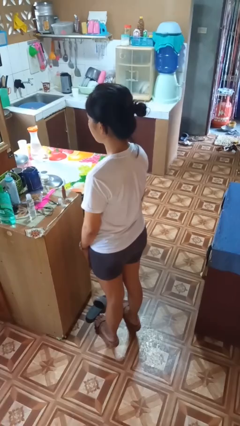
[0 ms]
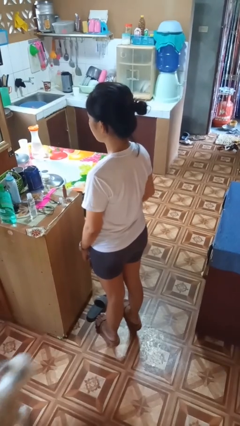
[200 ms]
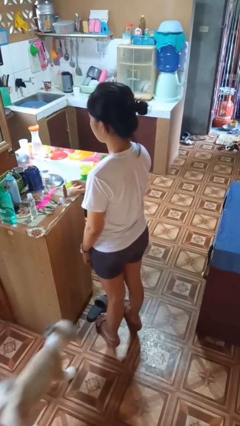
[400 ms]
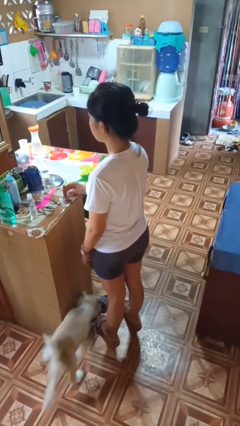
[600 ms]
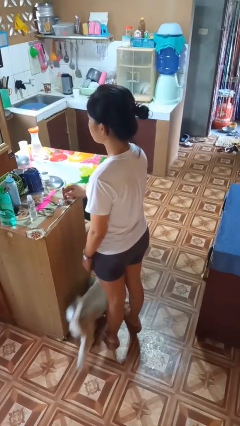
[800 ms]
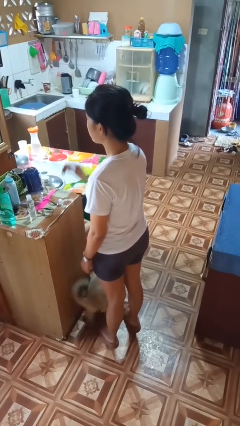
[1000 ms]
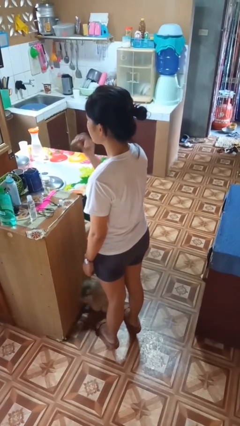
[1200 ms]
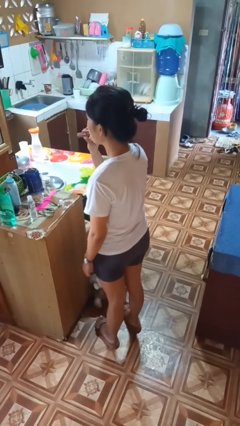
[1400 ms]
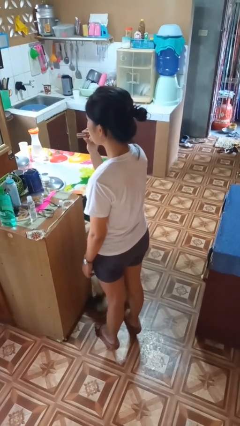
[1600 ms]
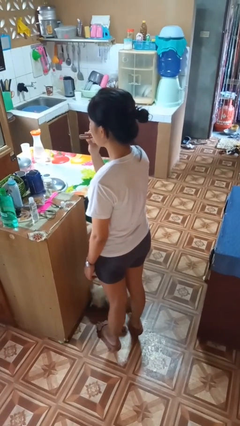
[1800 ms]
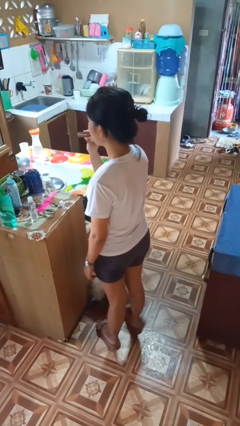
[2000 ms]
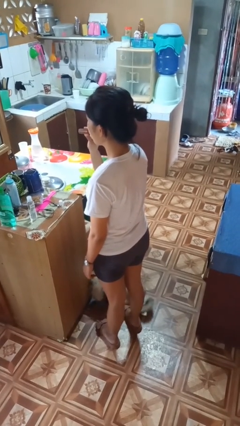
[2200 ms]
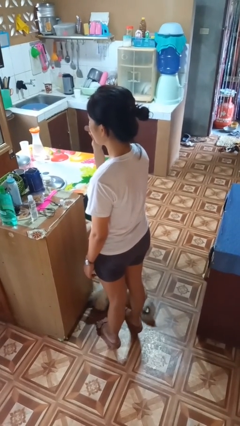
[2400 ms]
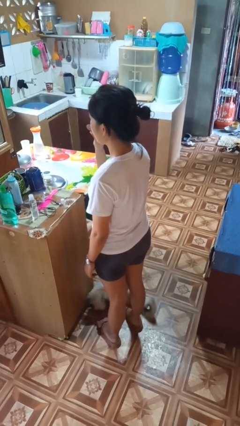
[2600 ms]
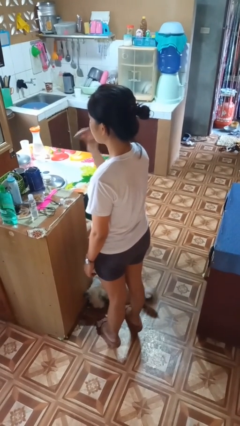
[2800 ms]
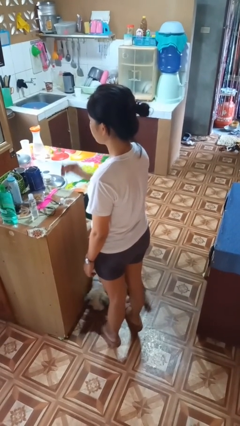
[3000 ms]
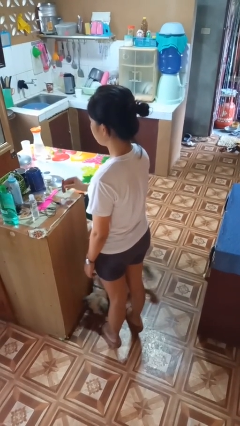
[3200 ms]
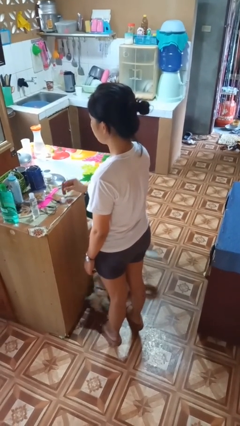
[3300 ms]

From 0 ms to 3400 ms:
person applies lip makeup

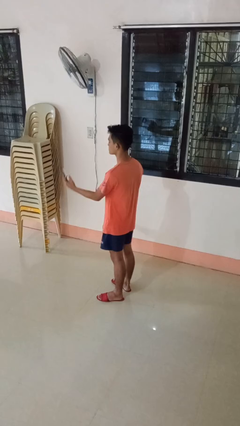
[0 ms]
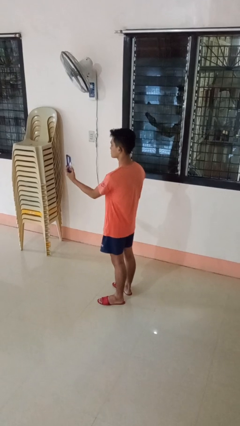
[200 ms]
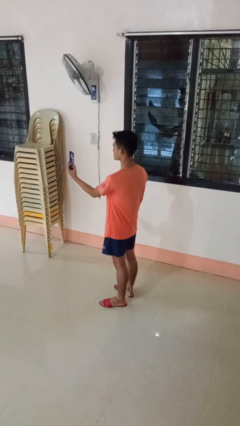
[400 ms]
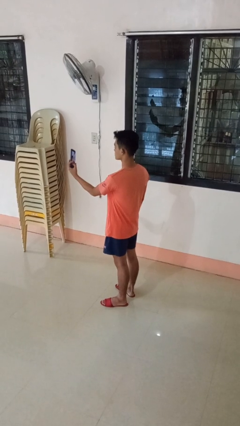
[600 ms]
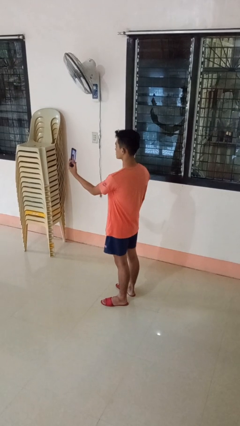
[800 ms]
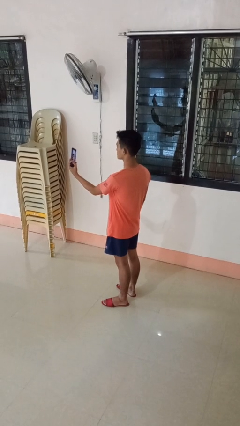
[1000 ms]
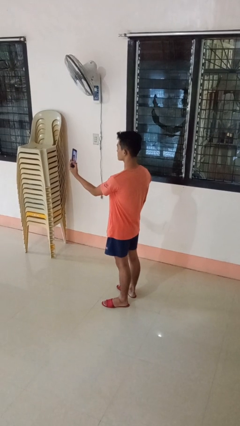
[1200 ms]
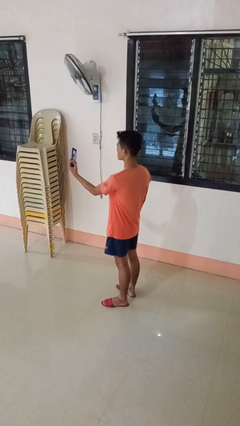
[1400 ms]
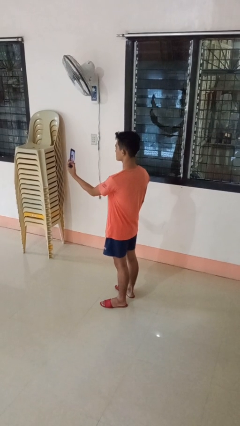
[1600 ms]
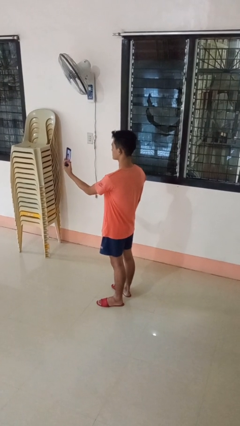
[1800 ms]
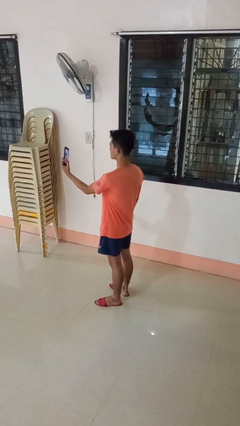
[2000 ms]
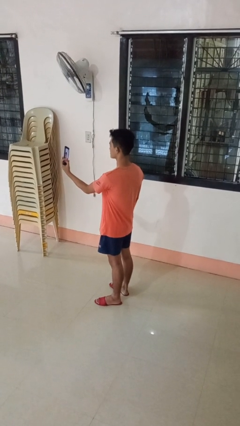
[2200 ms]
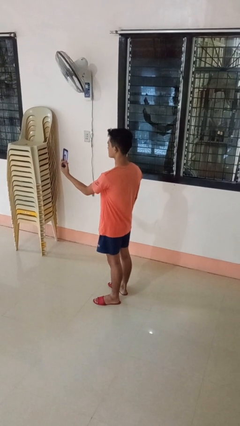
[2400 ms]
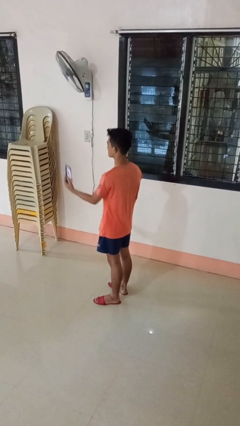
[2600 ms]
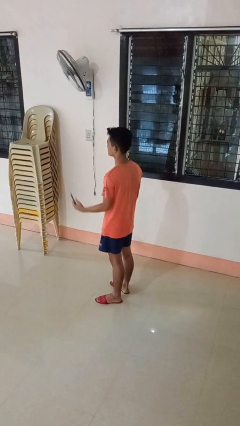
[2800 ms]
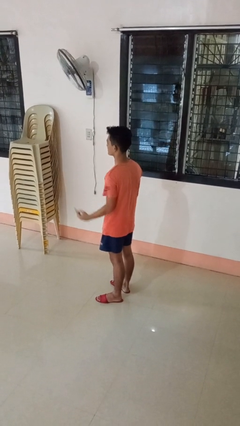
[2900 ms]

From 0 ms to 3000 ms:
person takes selfie

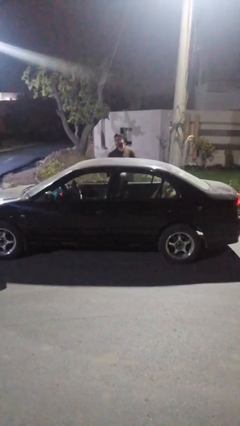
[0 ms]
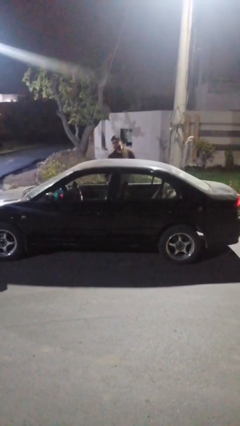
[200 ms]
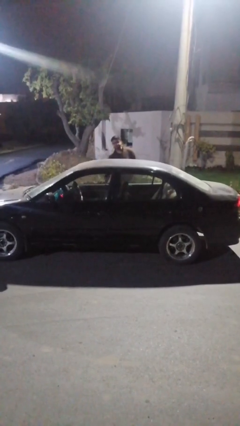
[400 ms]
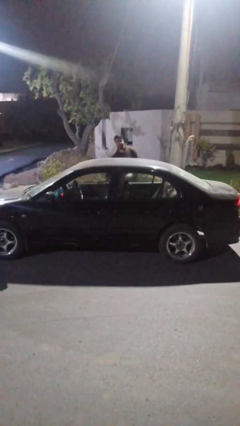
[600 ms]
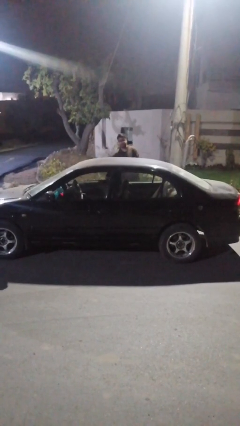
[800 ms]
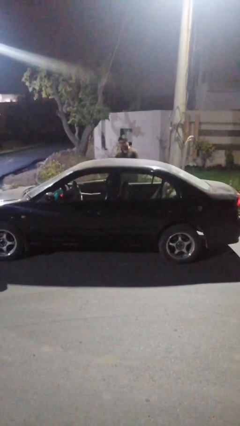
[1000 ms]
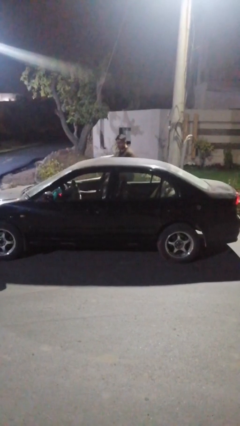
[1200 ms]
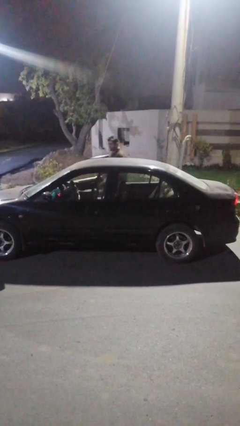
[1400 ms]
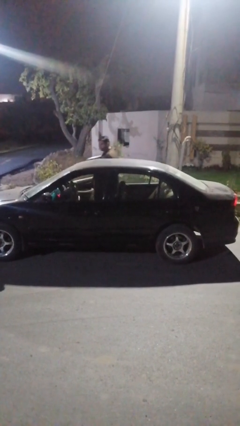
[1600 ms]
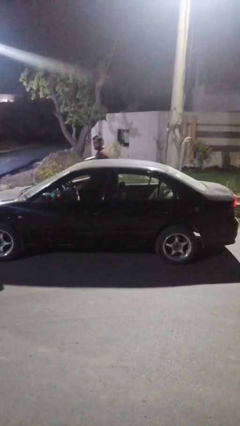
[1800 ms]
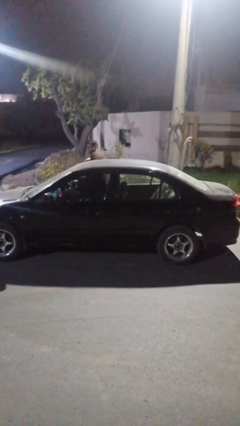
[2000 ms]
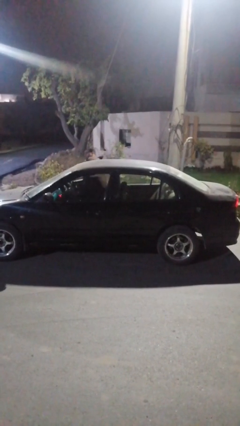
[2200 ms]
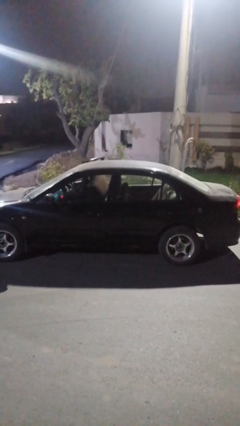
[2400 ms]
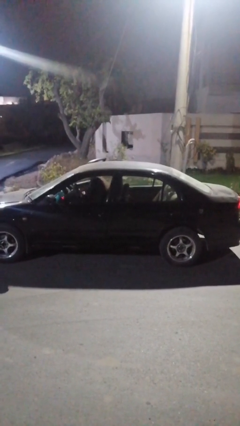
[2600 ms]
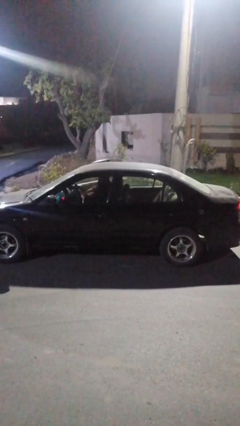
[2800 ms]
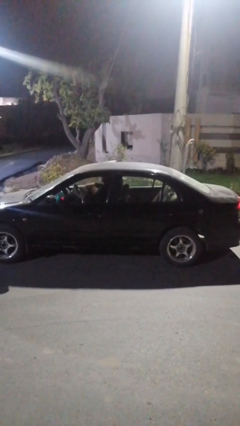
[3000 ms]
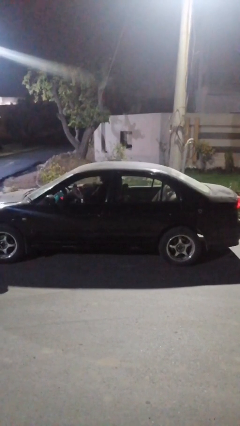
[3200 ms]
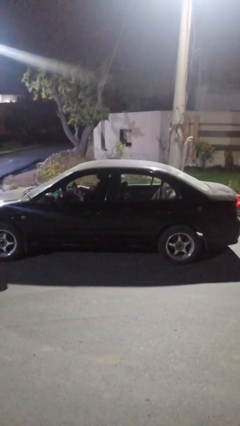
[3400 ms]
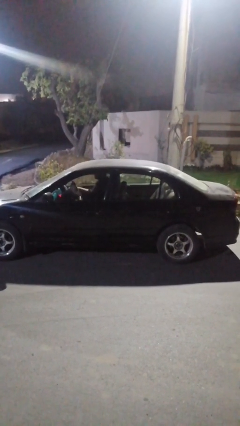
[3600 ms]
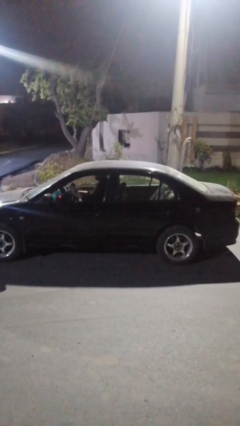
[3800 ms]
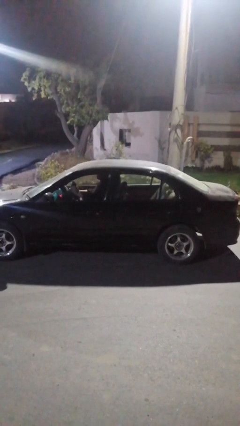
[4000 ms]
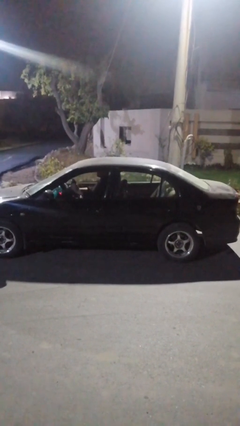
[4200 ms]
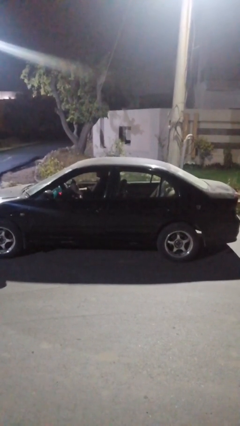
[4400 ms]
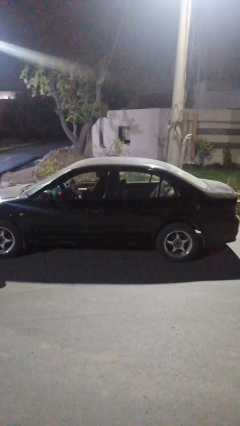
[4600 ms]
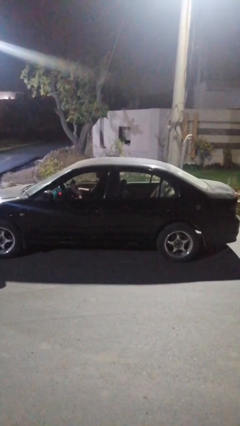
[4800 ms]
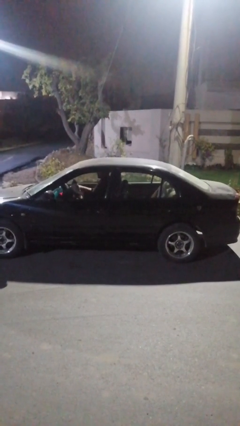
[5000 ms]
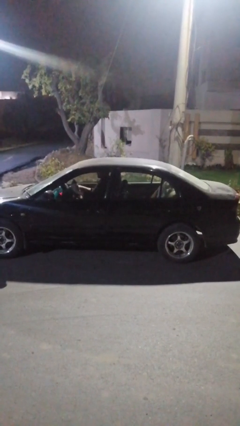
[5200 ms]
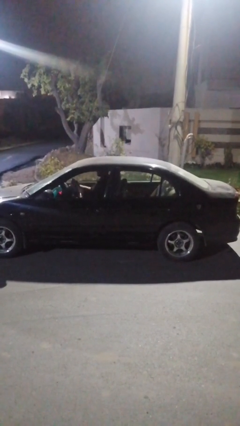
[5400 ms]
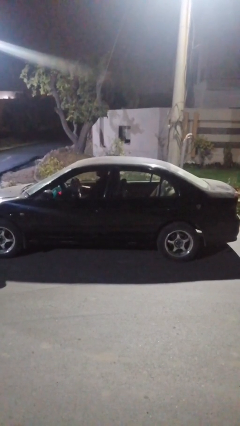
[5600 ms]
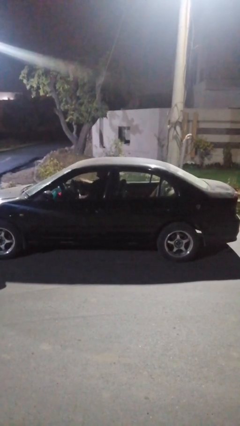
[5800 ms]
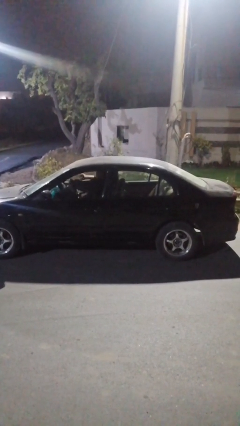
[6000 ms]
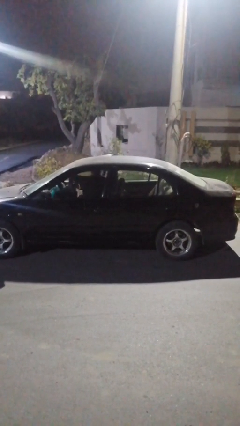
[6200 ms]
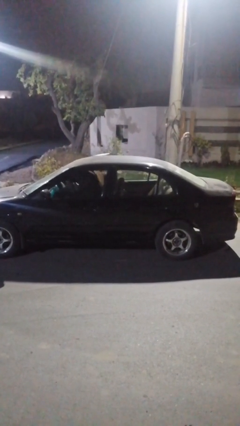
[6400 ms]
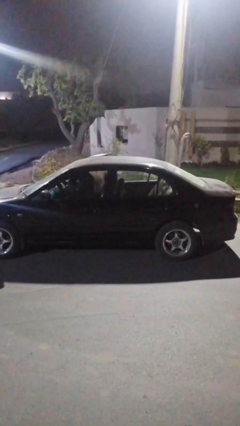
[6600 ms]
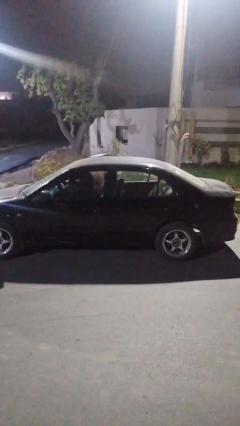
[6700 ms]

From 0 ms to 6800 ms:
car picks up person

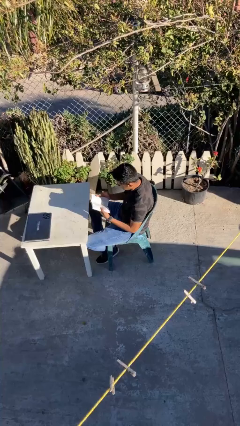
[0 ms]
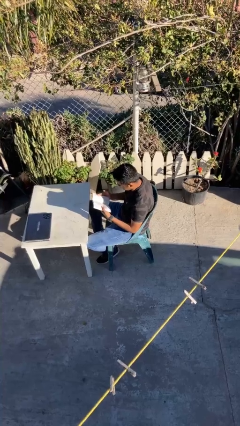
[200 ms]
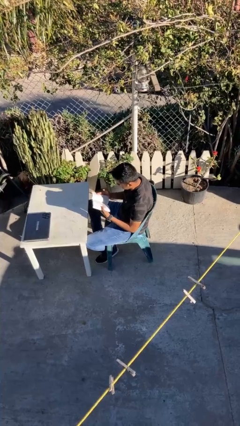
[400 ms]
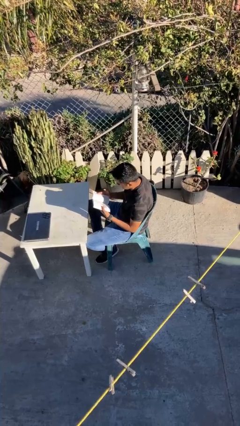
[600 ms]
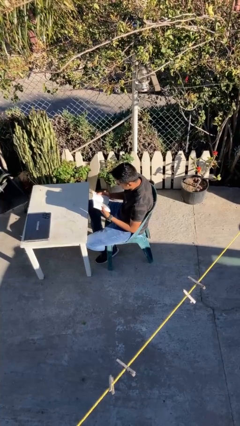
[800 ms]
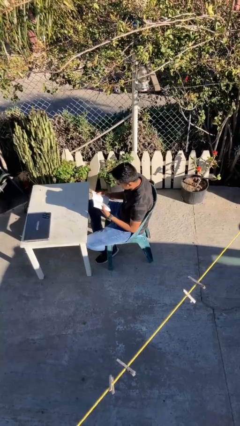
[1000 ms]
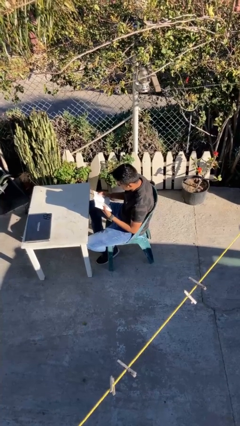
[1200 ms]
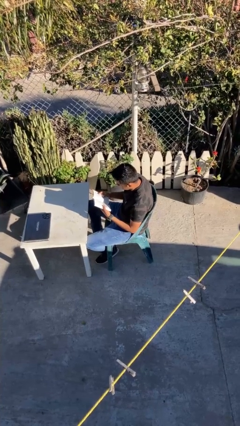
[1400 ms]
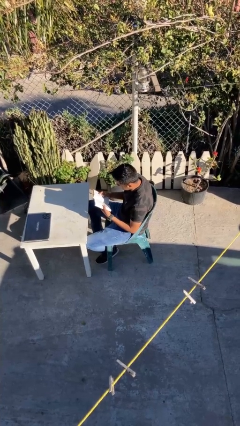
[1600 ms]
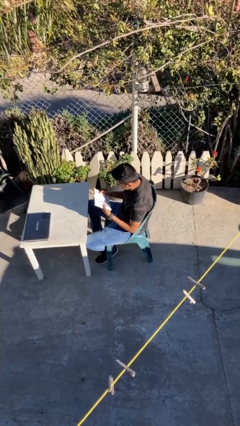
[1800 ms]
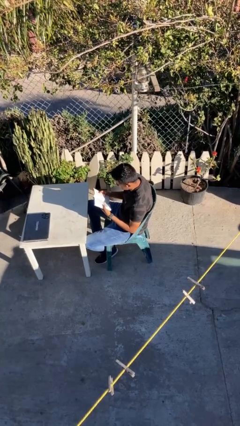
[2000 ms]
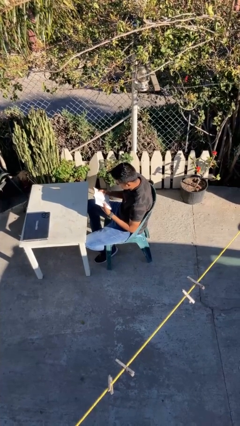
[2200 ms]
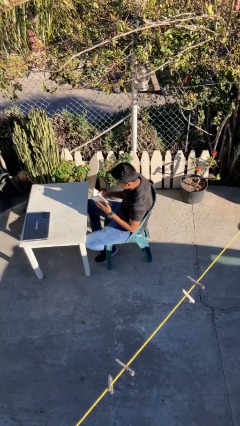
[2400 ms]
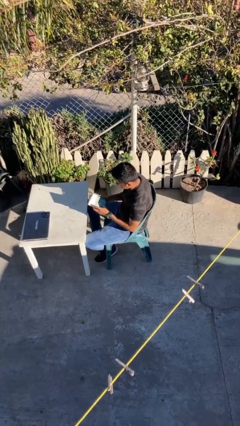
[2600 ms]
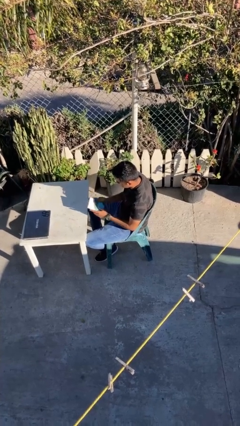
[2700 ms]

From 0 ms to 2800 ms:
person reads document

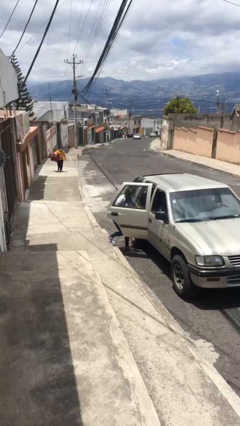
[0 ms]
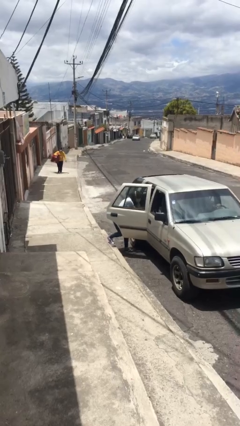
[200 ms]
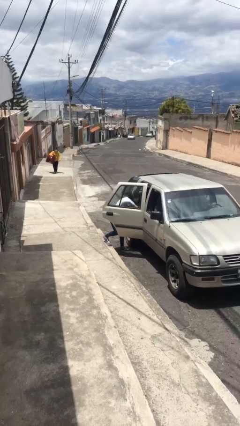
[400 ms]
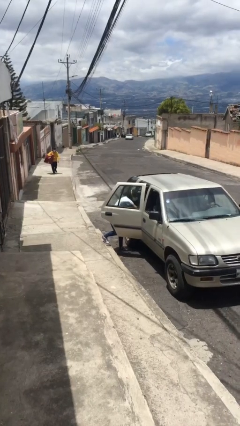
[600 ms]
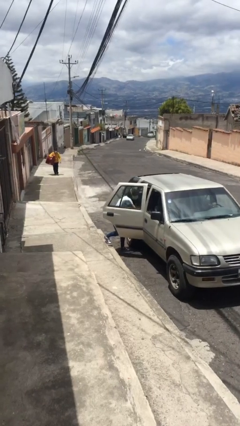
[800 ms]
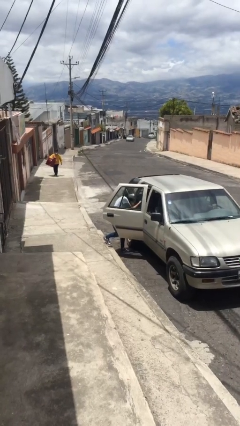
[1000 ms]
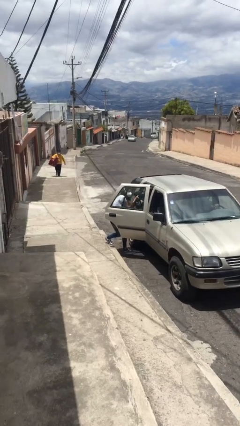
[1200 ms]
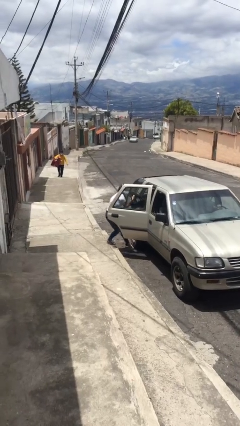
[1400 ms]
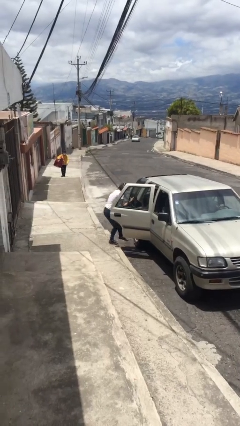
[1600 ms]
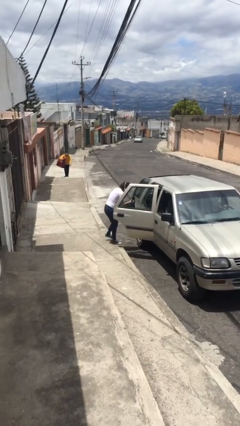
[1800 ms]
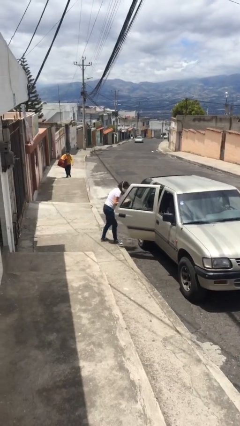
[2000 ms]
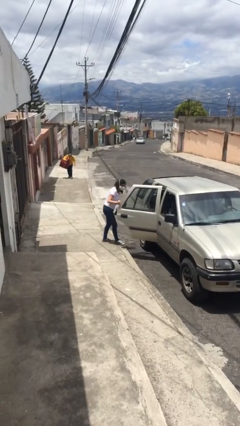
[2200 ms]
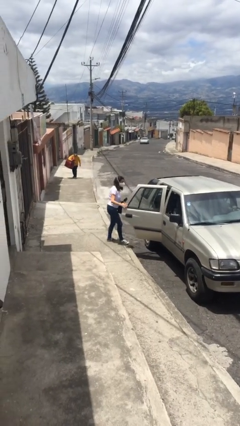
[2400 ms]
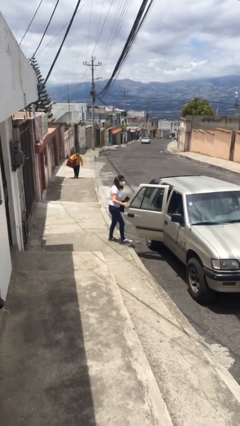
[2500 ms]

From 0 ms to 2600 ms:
person unloads car
